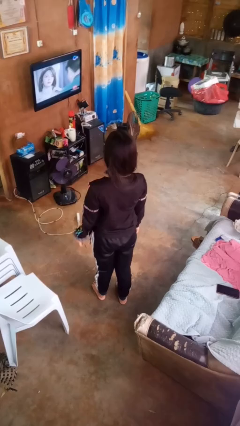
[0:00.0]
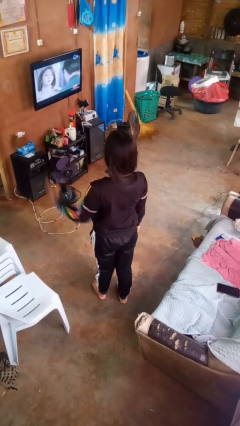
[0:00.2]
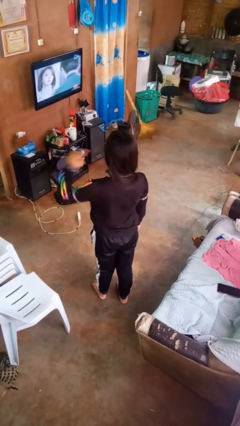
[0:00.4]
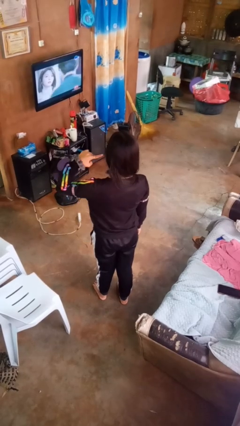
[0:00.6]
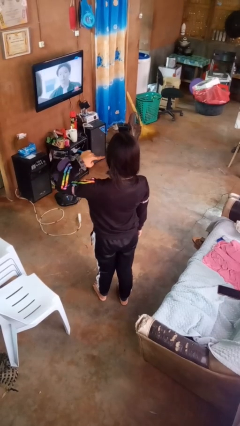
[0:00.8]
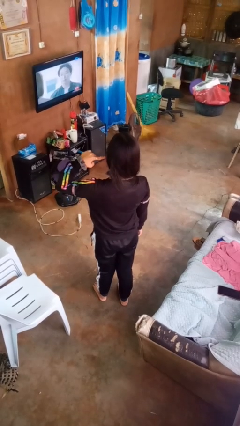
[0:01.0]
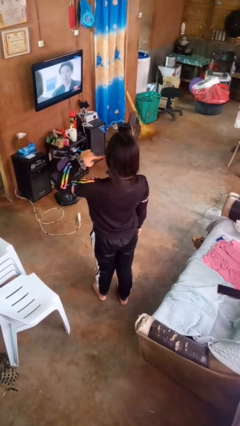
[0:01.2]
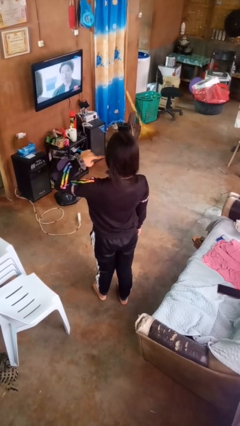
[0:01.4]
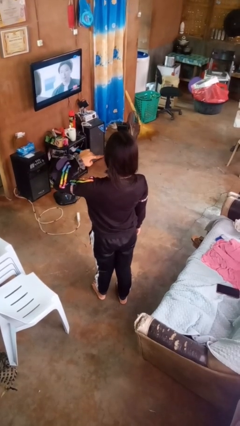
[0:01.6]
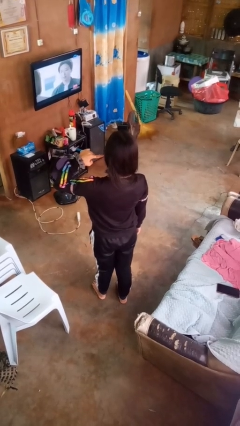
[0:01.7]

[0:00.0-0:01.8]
person gestures listen closely

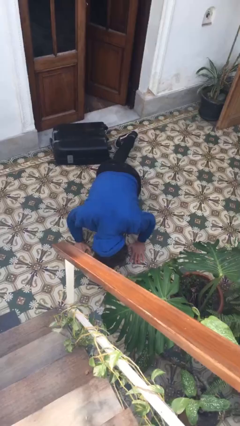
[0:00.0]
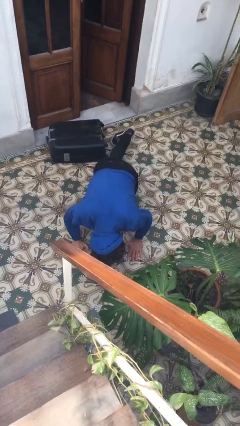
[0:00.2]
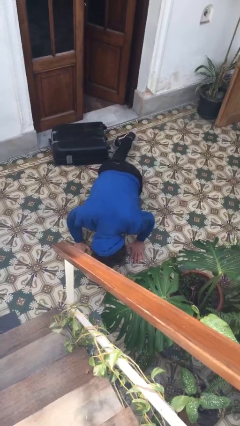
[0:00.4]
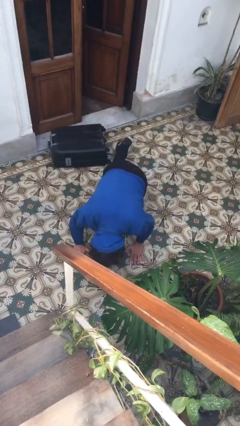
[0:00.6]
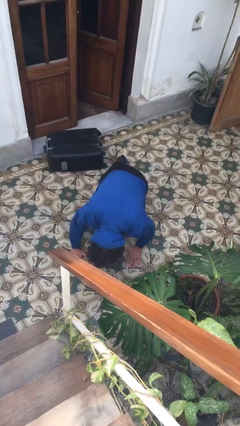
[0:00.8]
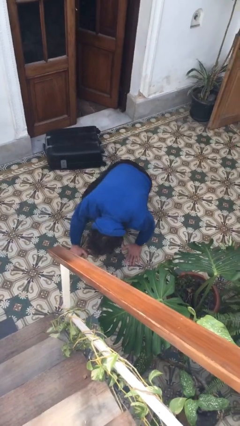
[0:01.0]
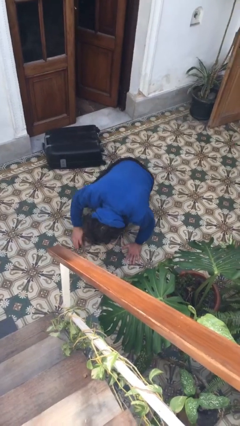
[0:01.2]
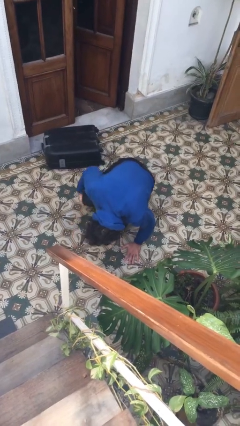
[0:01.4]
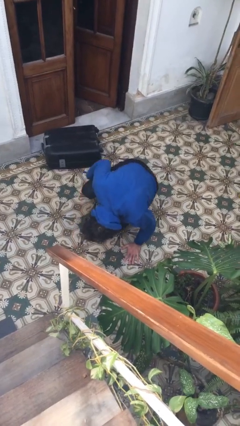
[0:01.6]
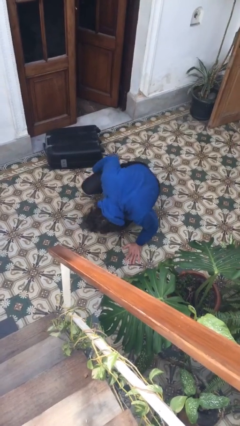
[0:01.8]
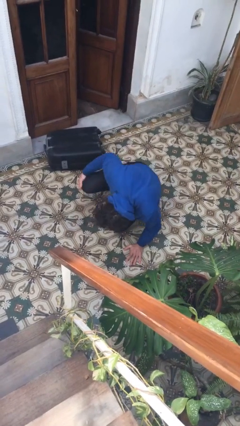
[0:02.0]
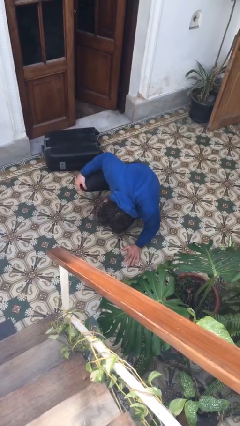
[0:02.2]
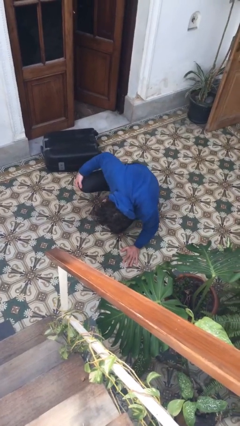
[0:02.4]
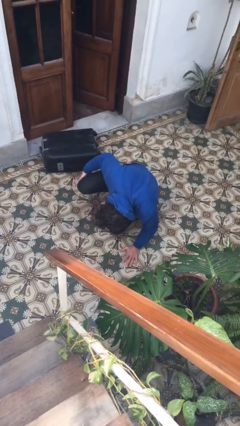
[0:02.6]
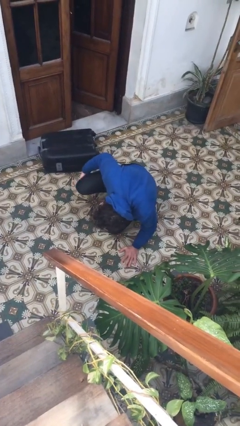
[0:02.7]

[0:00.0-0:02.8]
person lies down on floor

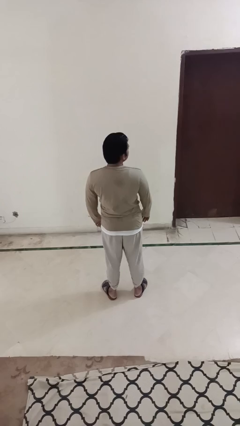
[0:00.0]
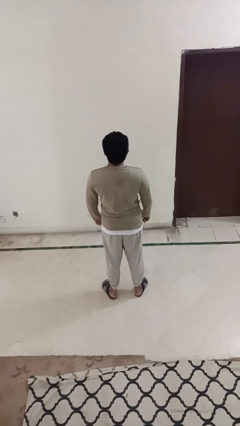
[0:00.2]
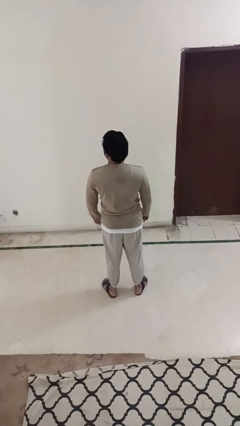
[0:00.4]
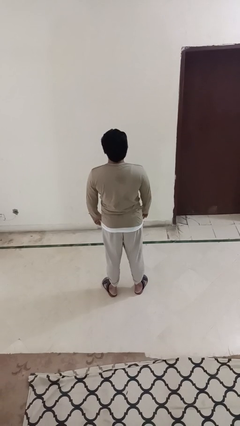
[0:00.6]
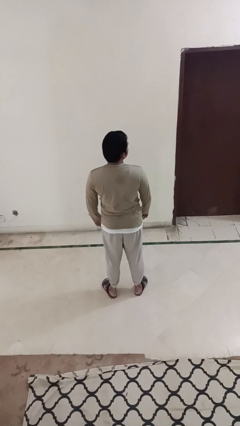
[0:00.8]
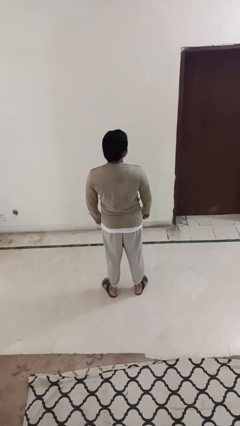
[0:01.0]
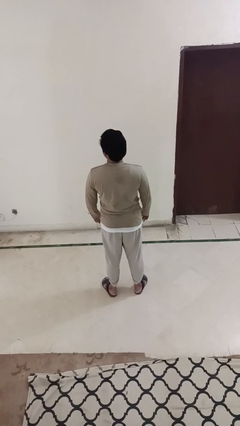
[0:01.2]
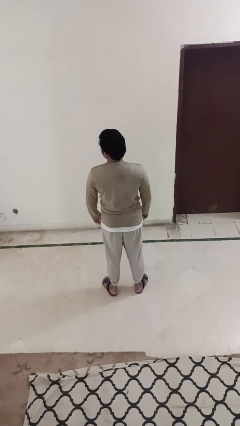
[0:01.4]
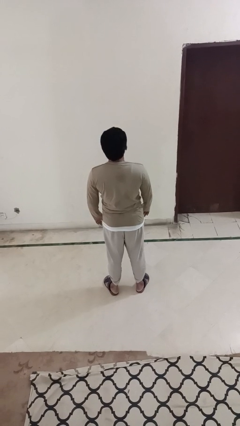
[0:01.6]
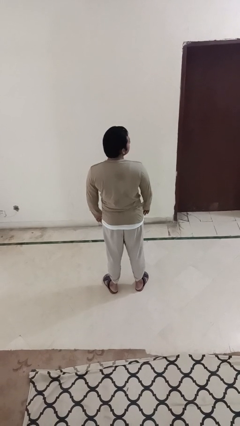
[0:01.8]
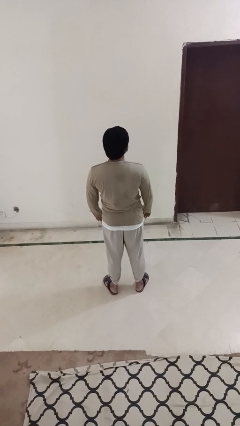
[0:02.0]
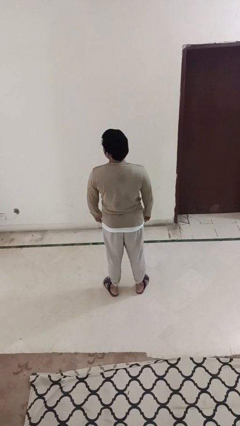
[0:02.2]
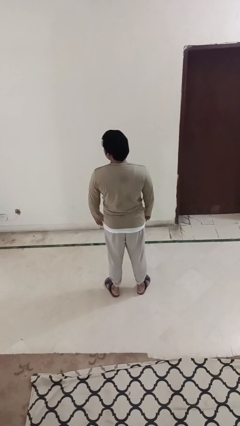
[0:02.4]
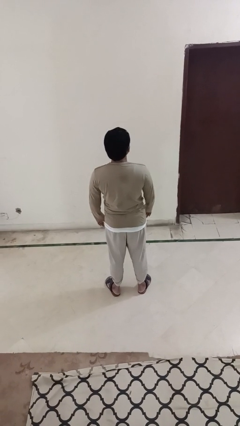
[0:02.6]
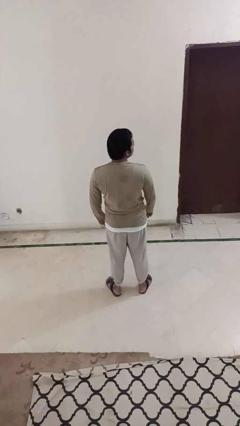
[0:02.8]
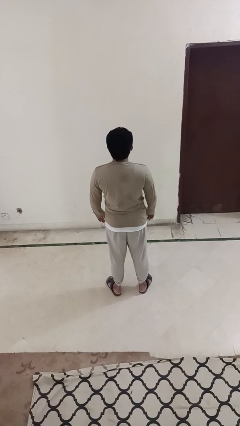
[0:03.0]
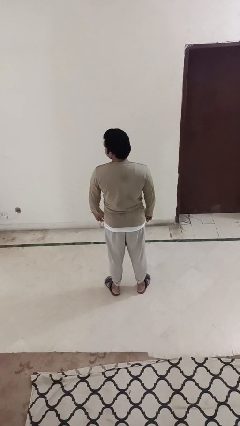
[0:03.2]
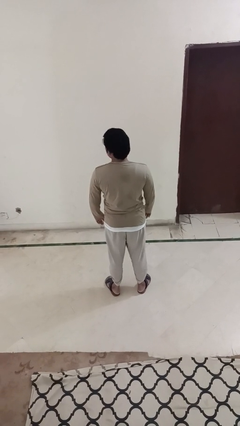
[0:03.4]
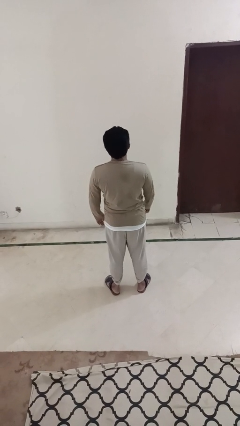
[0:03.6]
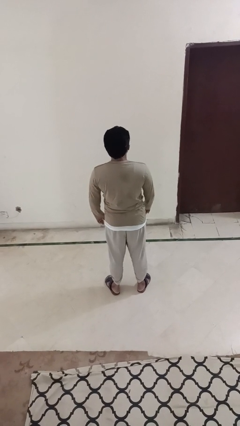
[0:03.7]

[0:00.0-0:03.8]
person shakes head

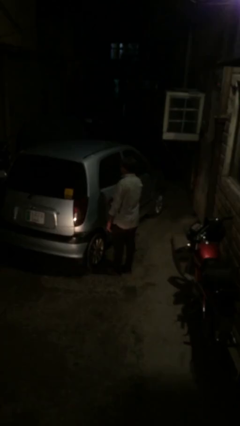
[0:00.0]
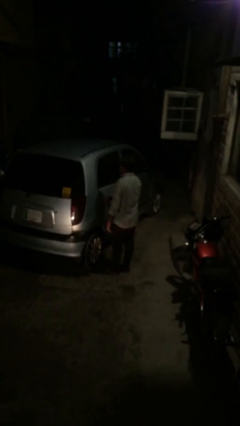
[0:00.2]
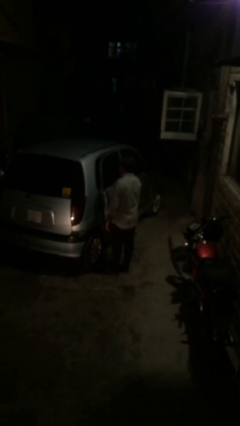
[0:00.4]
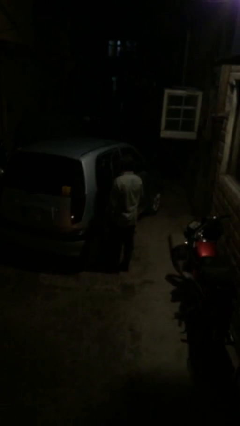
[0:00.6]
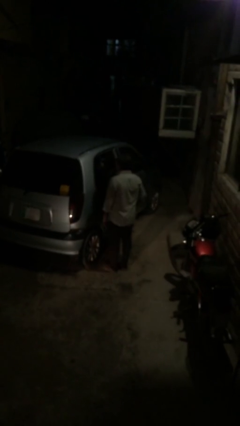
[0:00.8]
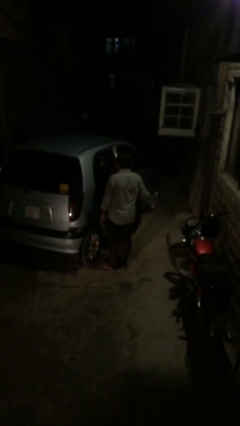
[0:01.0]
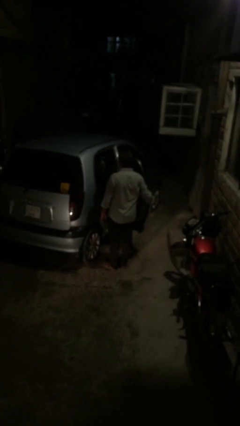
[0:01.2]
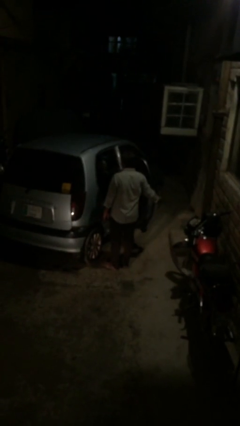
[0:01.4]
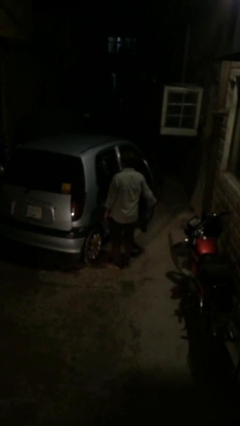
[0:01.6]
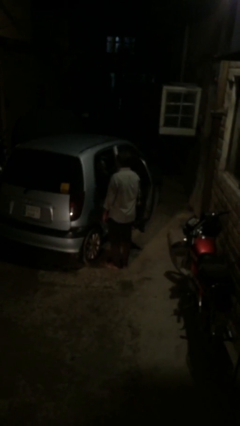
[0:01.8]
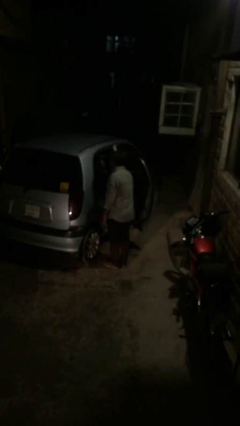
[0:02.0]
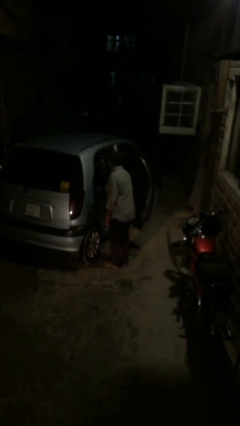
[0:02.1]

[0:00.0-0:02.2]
person opens car door

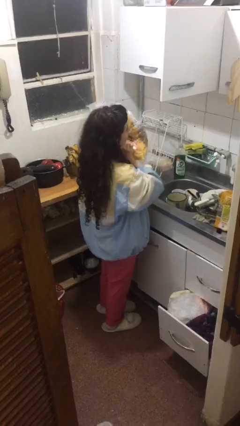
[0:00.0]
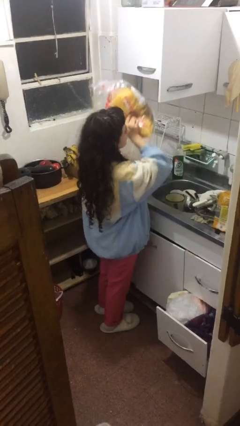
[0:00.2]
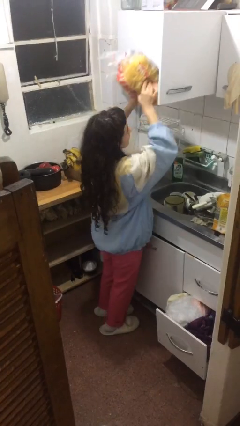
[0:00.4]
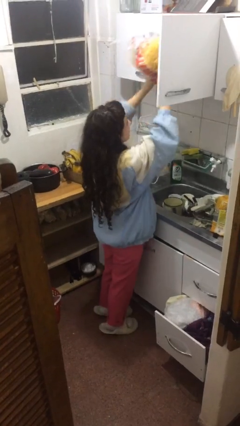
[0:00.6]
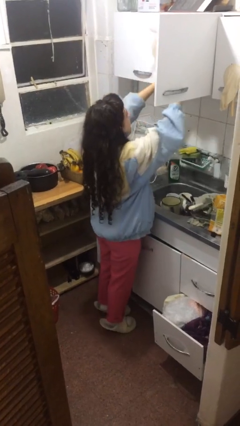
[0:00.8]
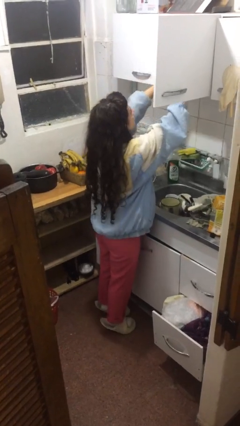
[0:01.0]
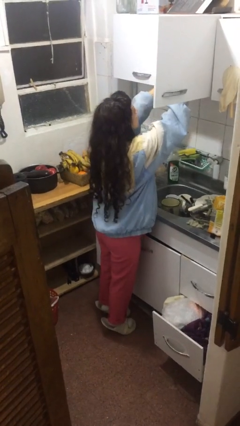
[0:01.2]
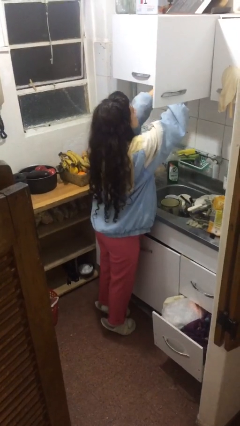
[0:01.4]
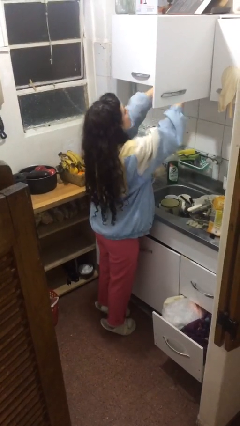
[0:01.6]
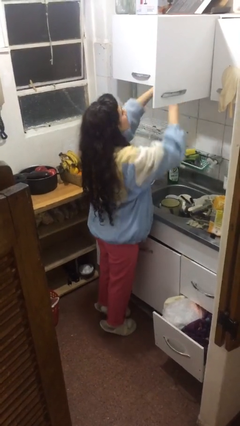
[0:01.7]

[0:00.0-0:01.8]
person puts down object into cabinet

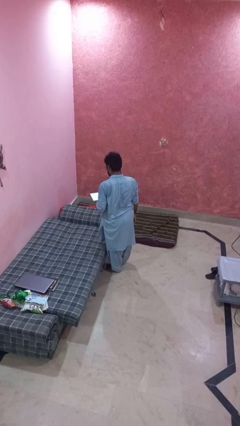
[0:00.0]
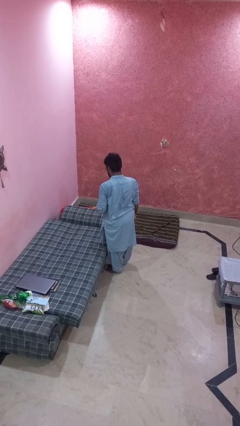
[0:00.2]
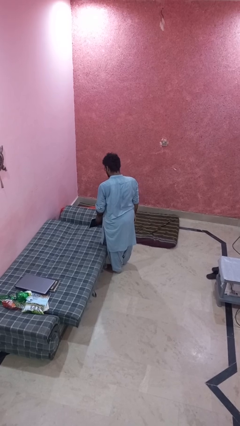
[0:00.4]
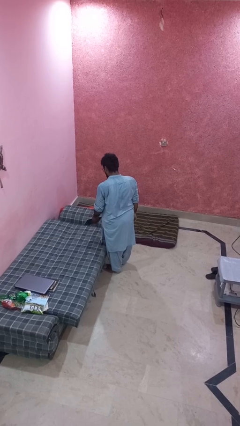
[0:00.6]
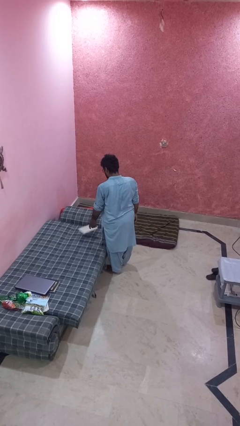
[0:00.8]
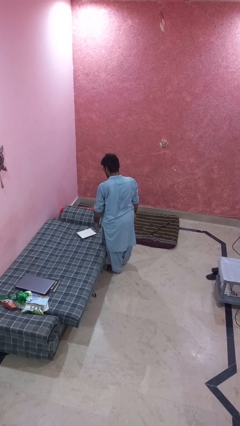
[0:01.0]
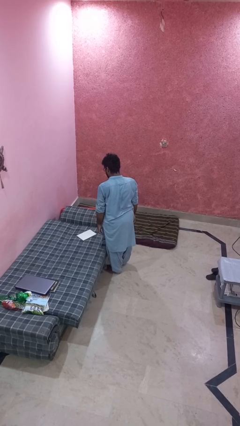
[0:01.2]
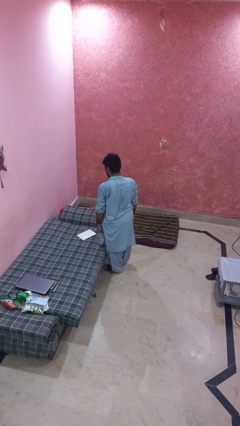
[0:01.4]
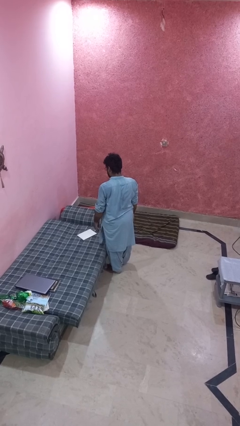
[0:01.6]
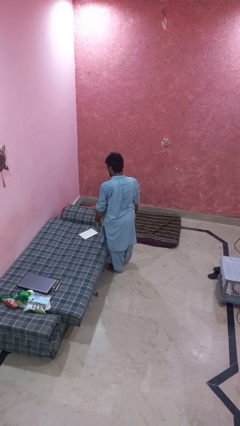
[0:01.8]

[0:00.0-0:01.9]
person puts down object on bed

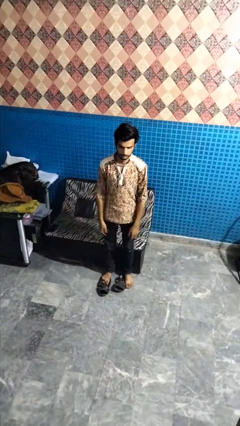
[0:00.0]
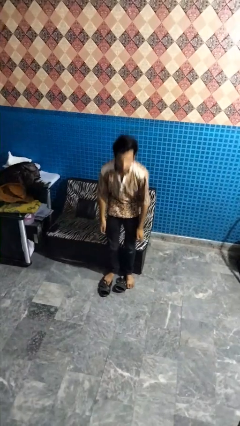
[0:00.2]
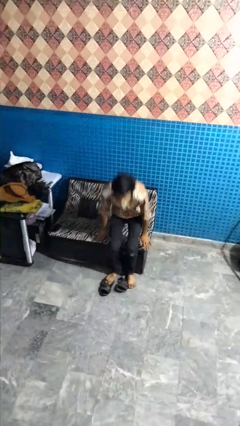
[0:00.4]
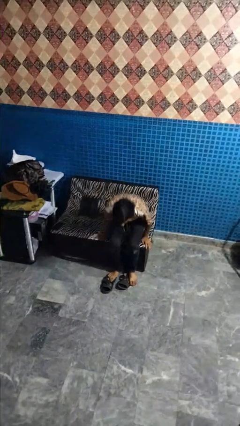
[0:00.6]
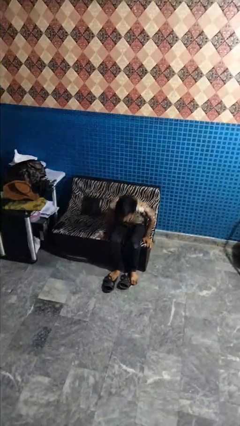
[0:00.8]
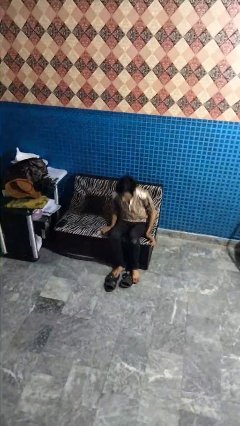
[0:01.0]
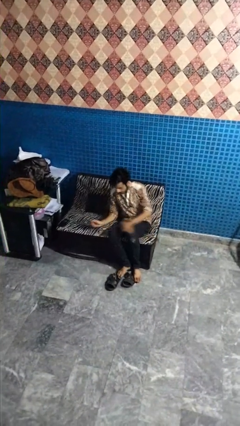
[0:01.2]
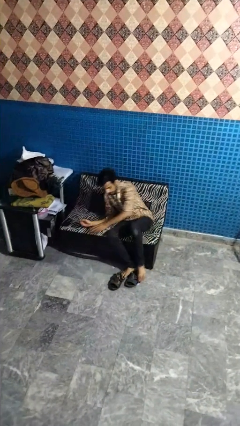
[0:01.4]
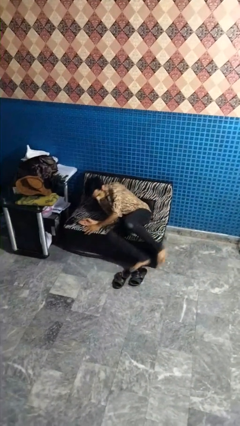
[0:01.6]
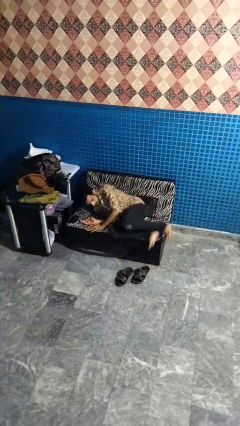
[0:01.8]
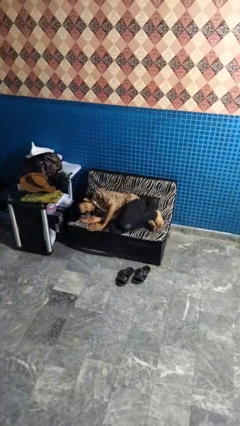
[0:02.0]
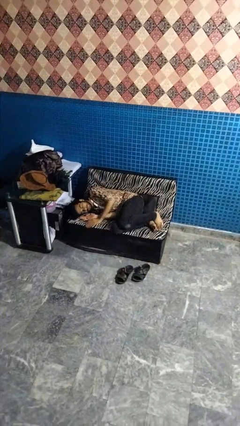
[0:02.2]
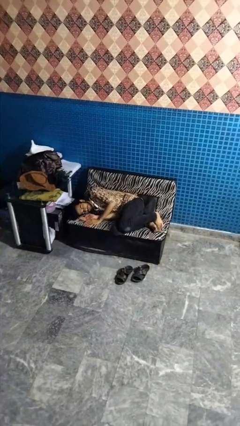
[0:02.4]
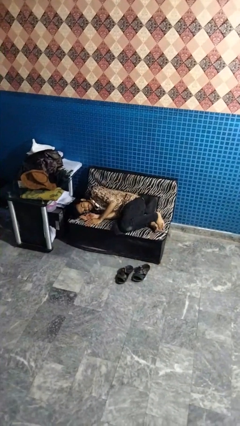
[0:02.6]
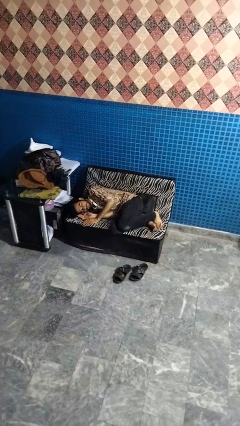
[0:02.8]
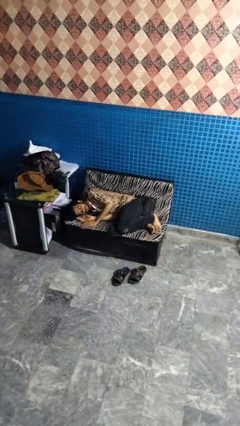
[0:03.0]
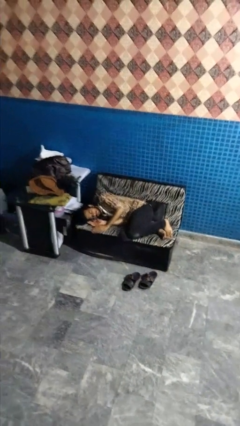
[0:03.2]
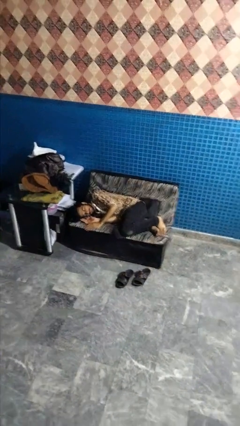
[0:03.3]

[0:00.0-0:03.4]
person lies down on couch
